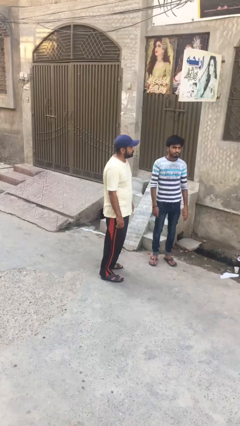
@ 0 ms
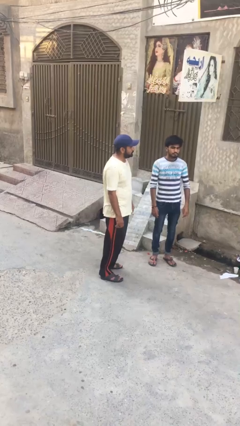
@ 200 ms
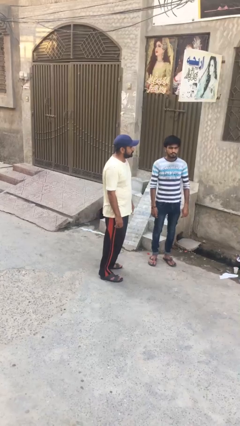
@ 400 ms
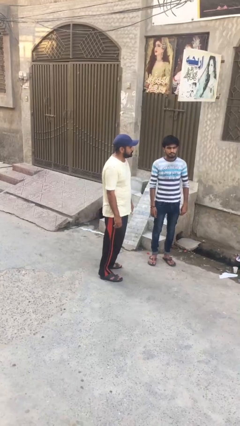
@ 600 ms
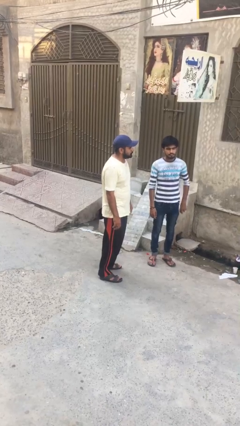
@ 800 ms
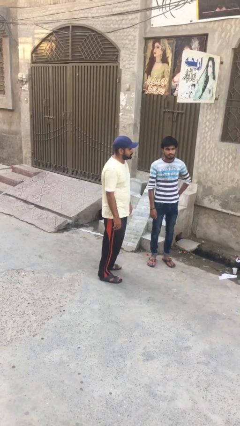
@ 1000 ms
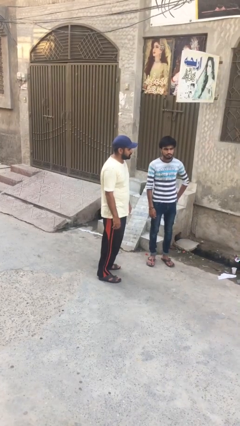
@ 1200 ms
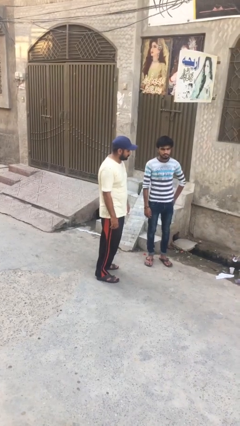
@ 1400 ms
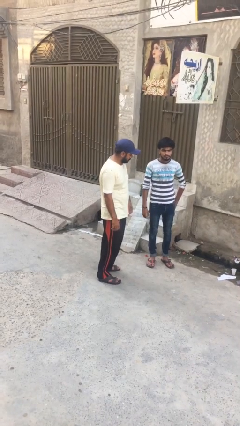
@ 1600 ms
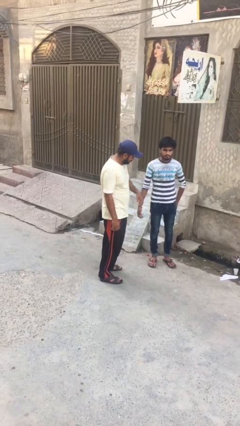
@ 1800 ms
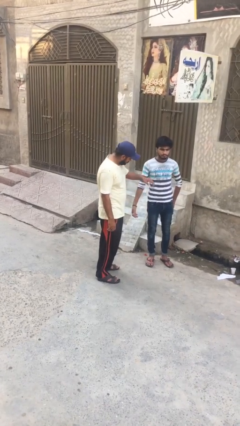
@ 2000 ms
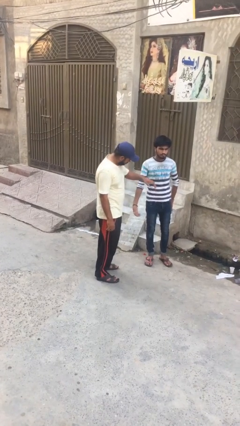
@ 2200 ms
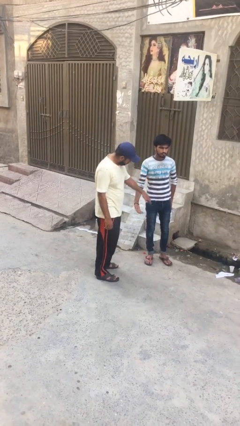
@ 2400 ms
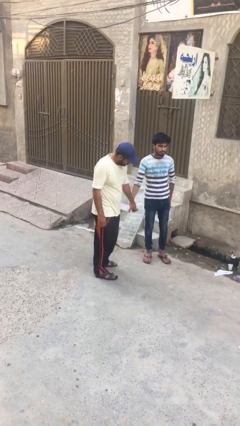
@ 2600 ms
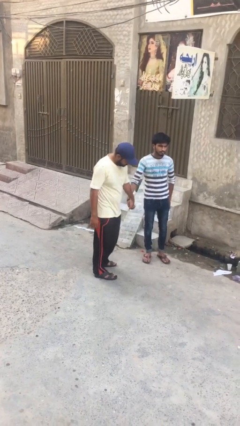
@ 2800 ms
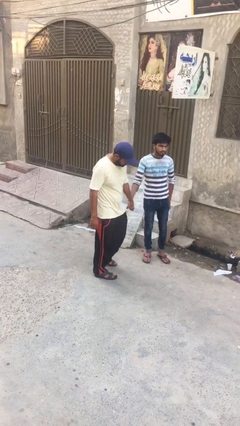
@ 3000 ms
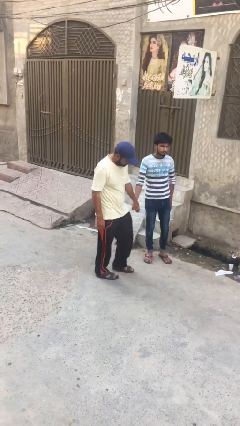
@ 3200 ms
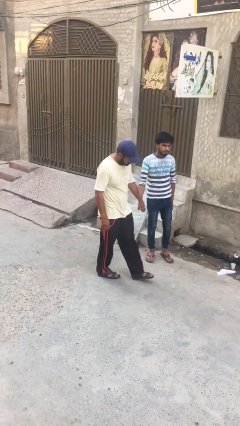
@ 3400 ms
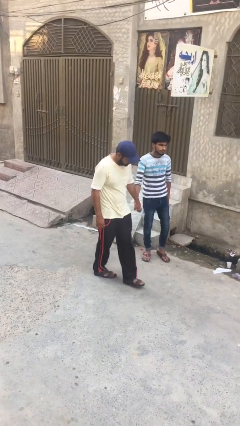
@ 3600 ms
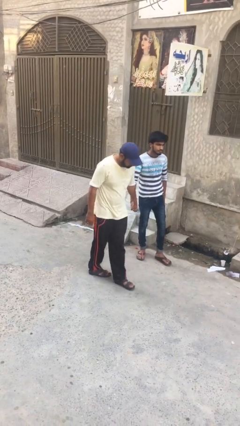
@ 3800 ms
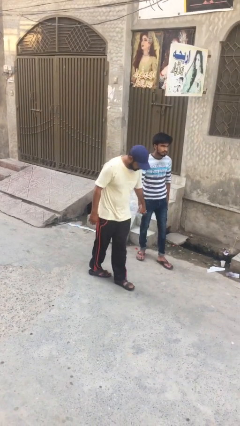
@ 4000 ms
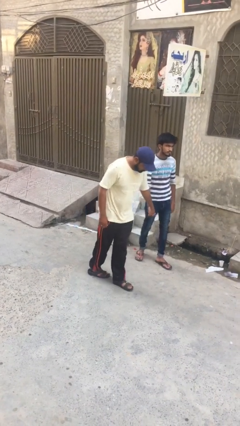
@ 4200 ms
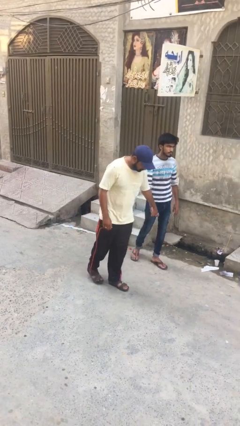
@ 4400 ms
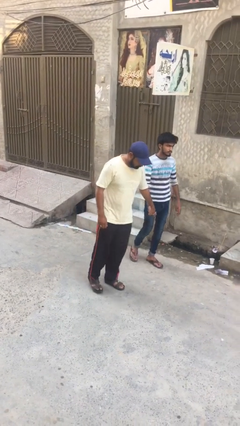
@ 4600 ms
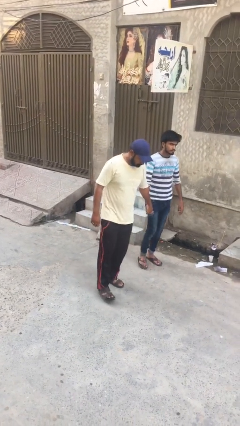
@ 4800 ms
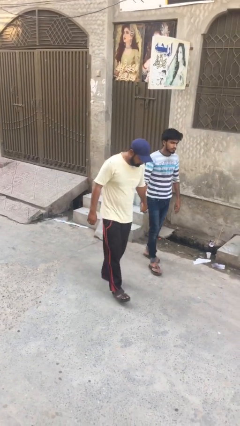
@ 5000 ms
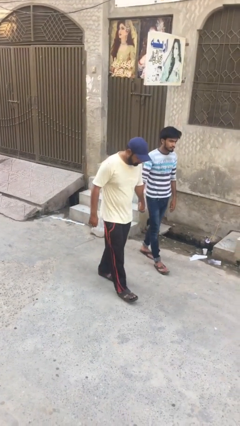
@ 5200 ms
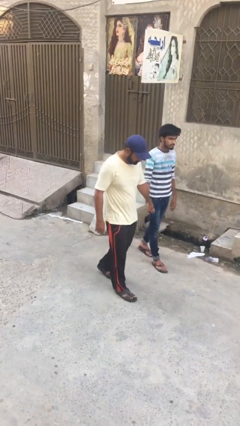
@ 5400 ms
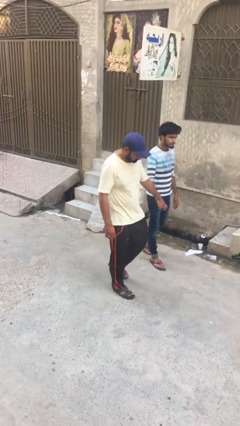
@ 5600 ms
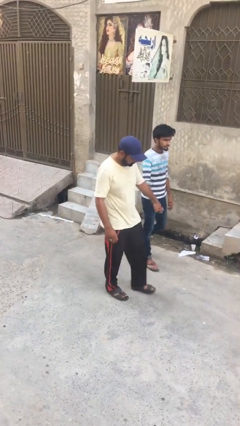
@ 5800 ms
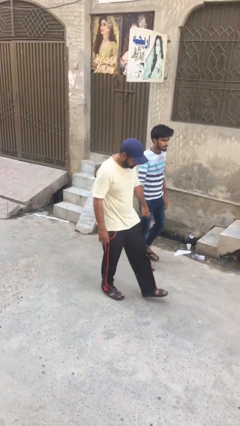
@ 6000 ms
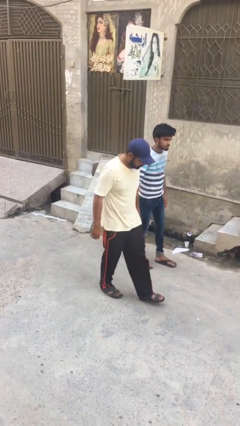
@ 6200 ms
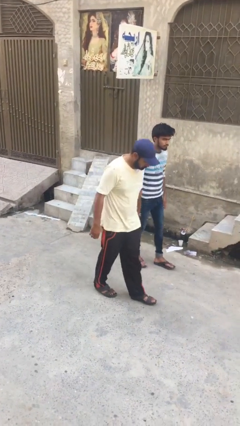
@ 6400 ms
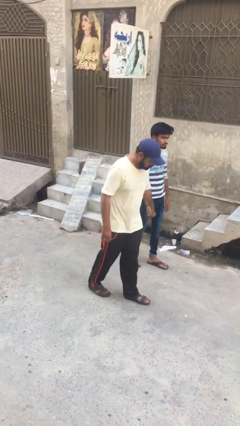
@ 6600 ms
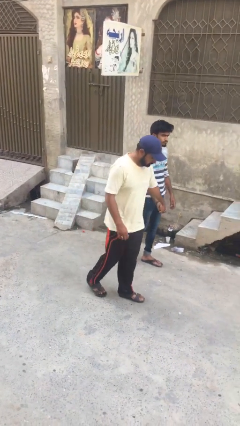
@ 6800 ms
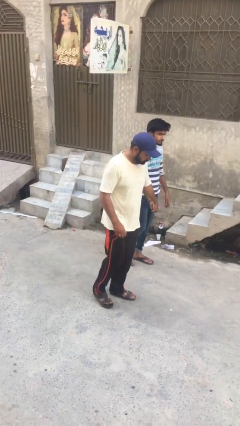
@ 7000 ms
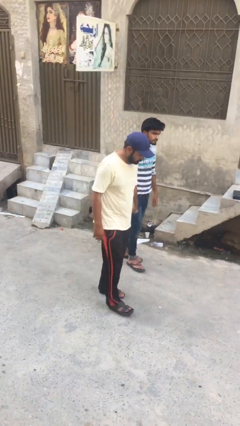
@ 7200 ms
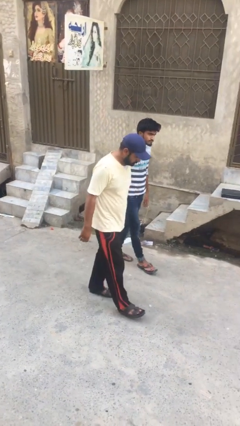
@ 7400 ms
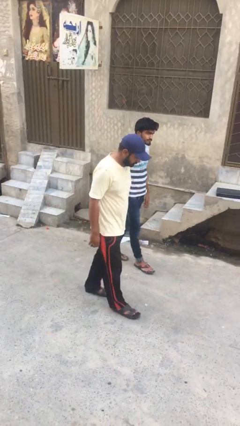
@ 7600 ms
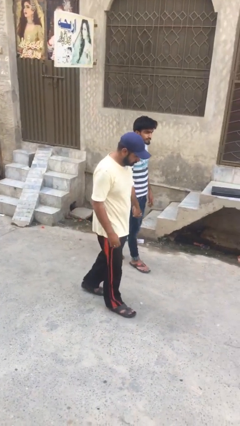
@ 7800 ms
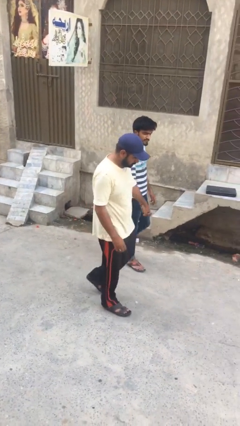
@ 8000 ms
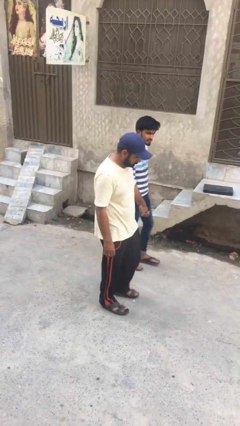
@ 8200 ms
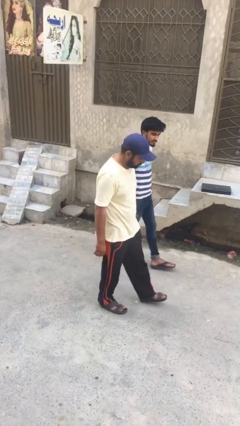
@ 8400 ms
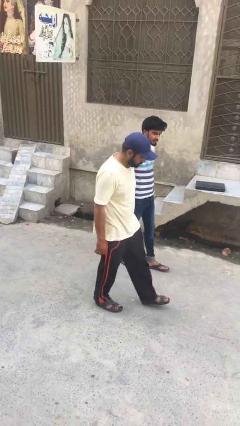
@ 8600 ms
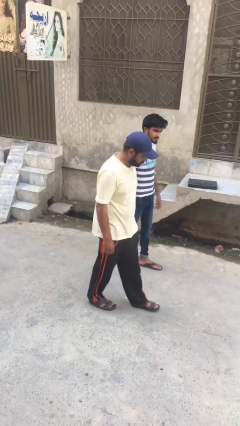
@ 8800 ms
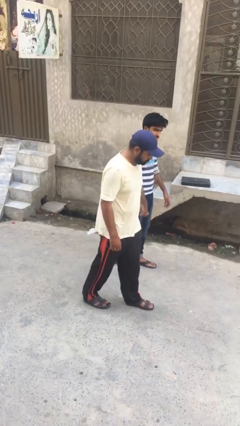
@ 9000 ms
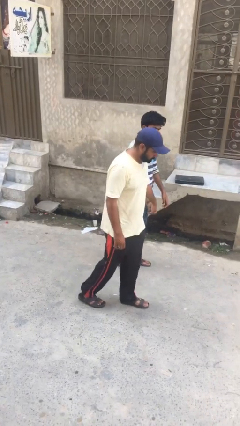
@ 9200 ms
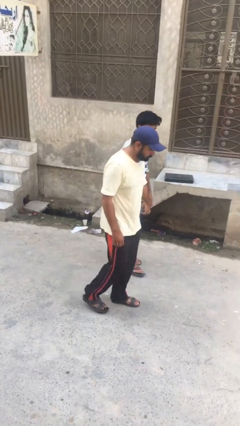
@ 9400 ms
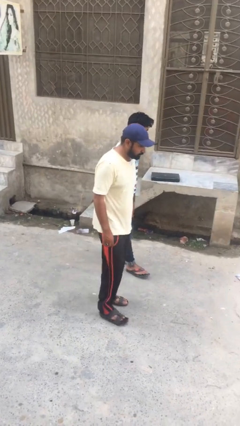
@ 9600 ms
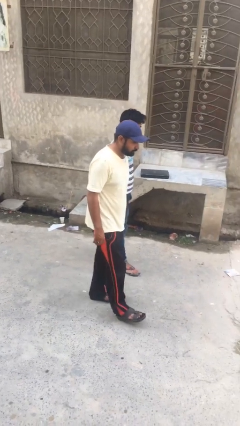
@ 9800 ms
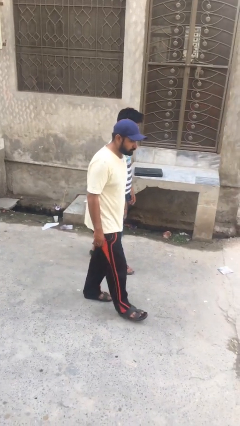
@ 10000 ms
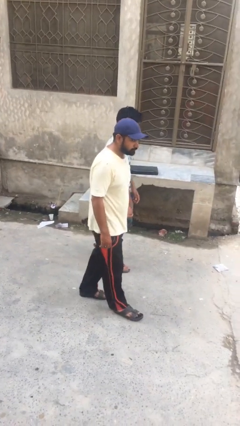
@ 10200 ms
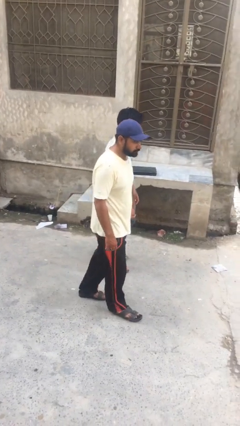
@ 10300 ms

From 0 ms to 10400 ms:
person holds hand

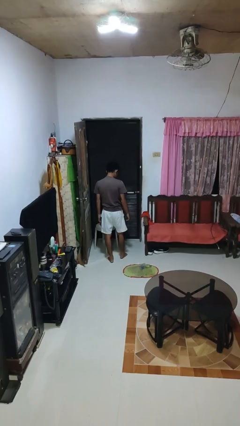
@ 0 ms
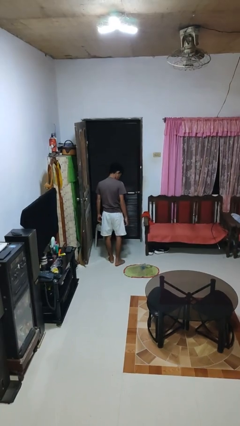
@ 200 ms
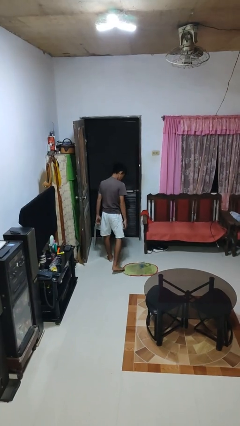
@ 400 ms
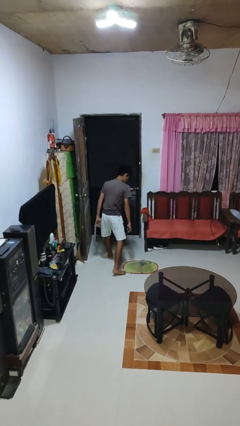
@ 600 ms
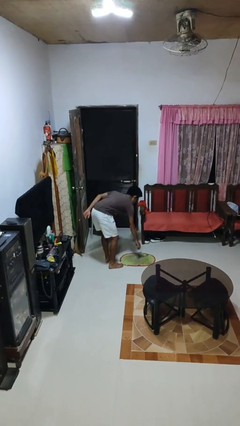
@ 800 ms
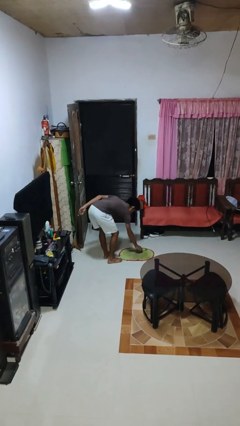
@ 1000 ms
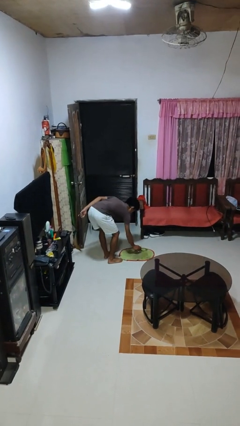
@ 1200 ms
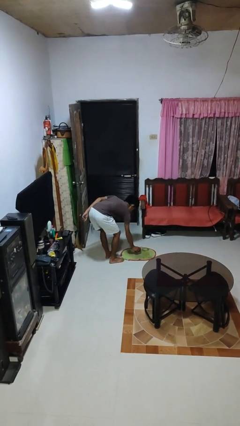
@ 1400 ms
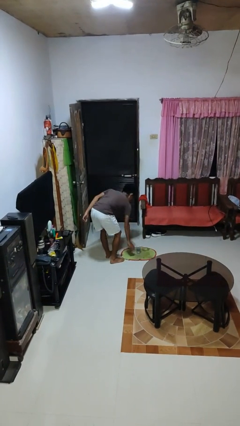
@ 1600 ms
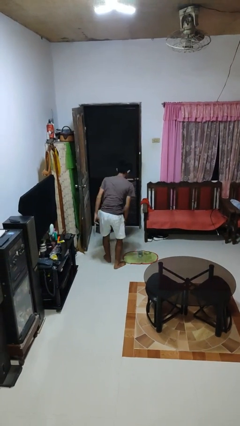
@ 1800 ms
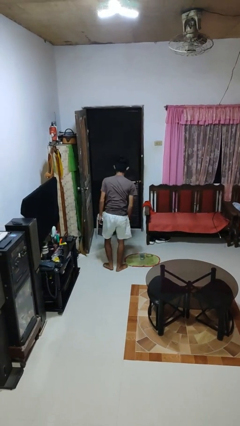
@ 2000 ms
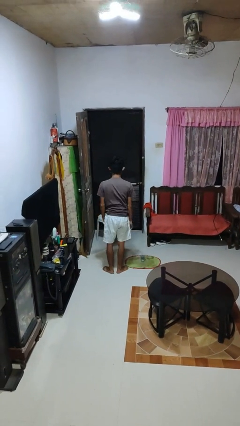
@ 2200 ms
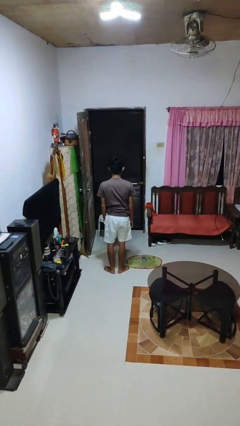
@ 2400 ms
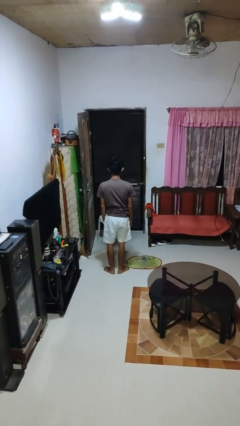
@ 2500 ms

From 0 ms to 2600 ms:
person sets upright glass

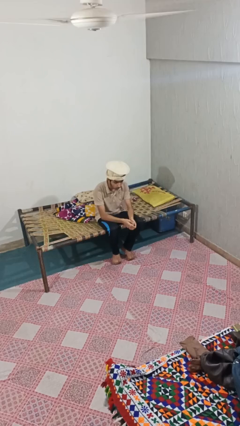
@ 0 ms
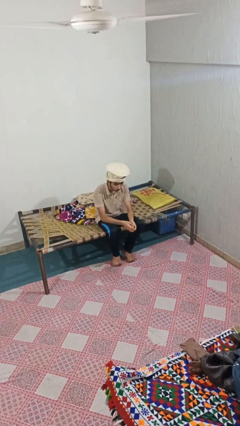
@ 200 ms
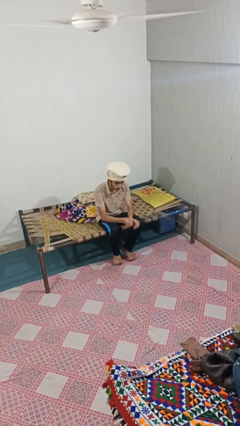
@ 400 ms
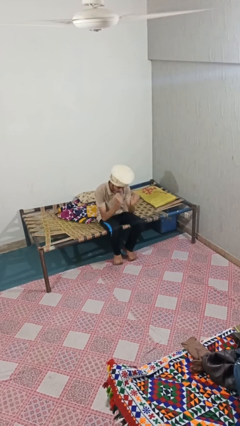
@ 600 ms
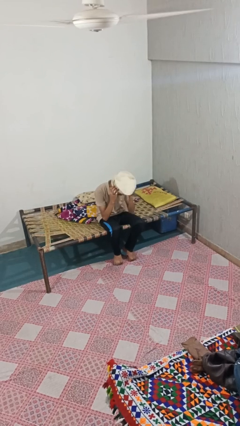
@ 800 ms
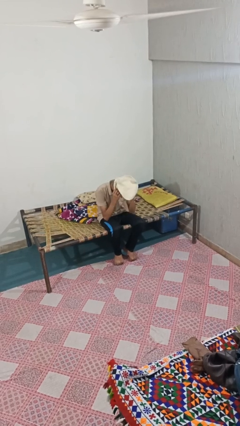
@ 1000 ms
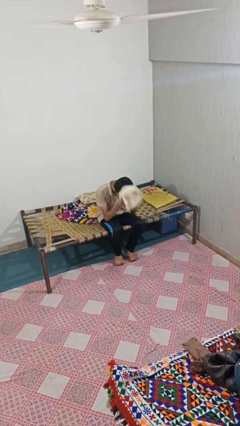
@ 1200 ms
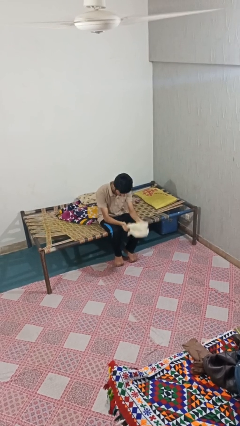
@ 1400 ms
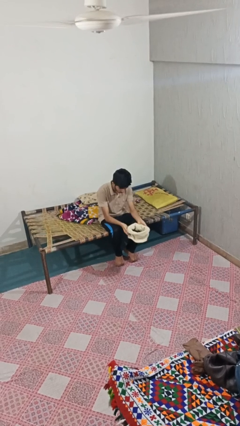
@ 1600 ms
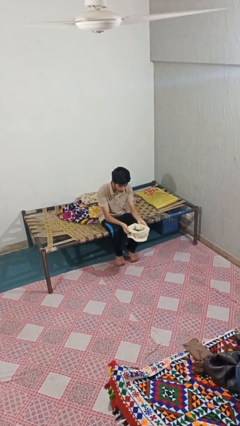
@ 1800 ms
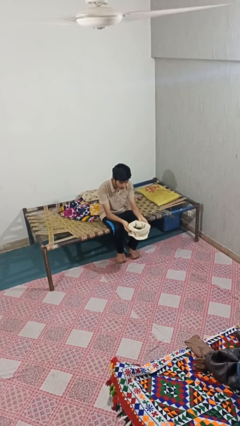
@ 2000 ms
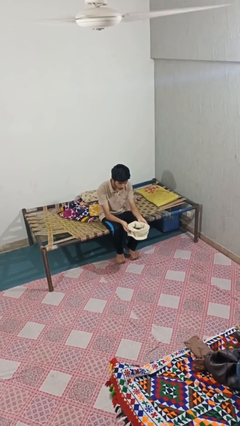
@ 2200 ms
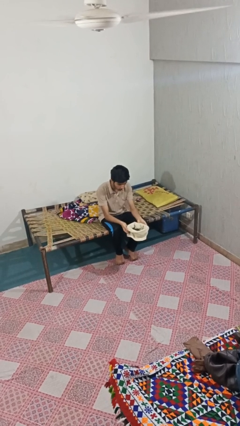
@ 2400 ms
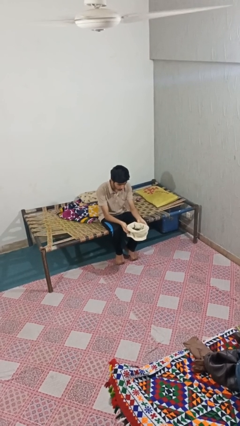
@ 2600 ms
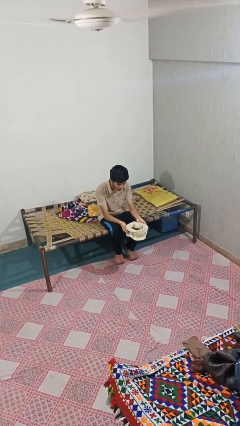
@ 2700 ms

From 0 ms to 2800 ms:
person takes off hat

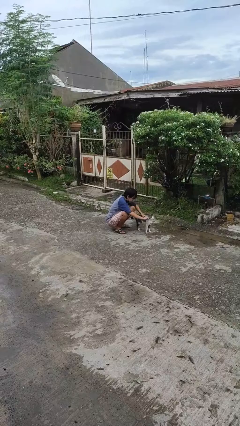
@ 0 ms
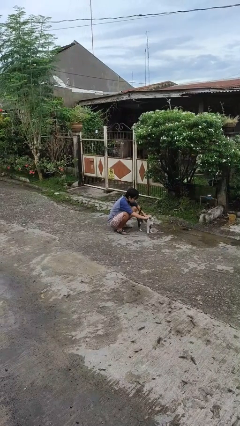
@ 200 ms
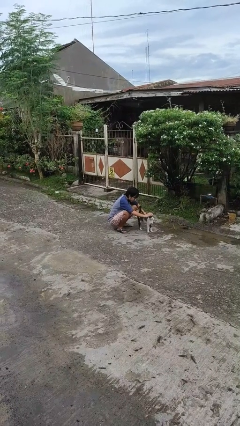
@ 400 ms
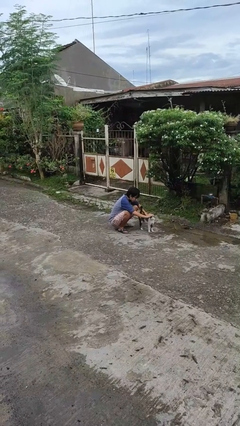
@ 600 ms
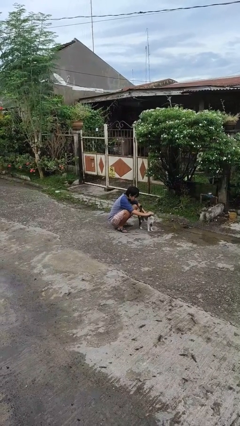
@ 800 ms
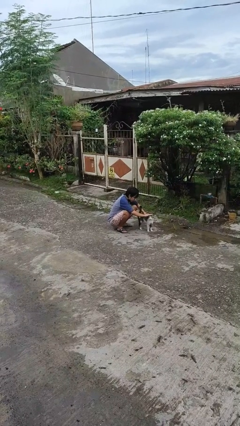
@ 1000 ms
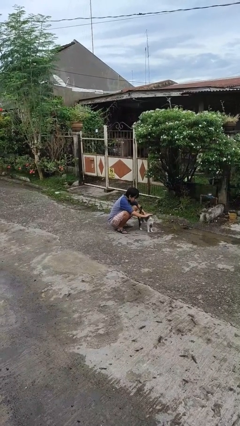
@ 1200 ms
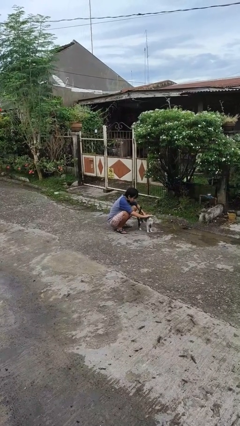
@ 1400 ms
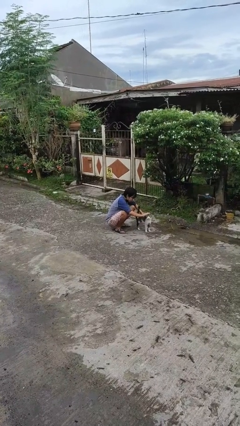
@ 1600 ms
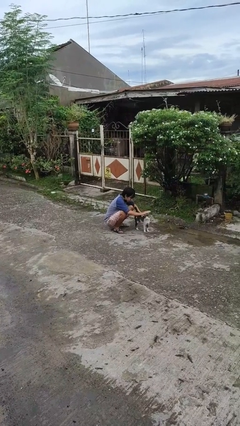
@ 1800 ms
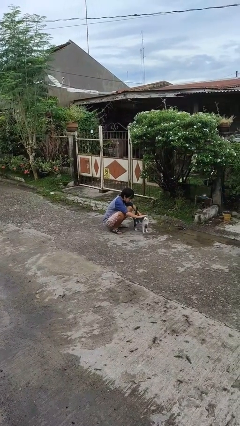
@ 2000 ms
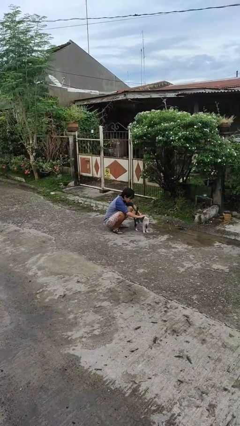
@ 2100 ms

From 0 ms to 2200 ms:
person pets cat
